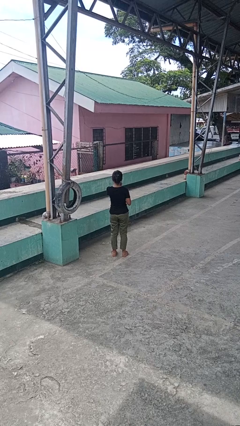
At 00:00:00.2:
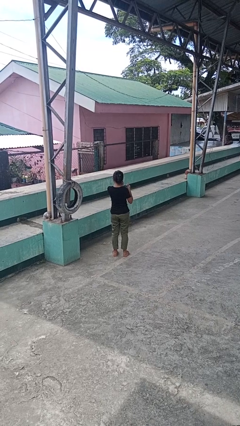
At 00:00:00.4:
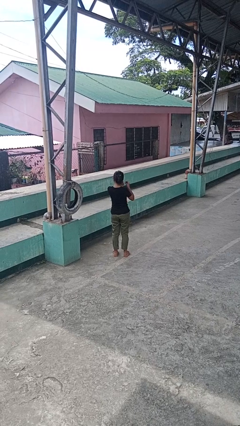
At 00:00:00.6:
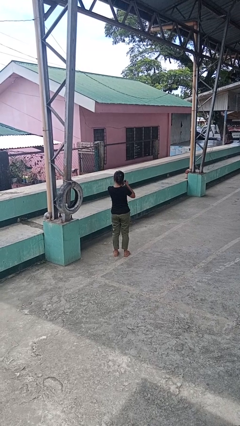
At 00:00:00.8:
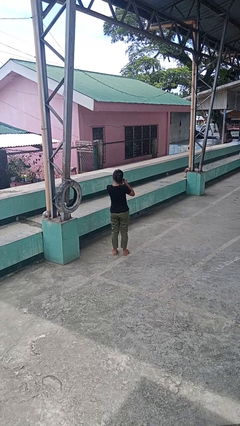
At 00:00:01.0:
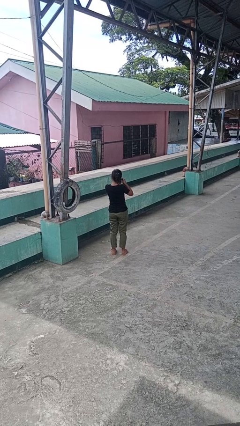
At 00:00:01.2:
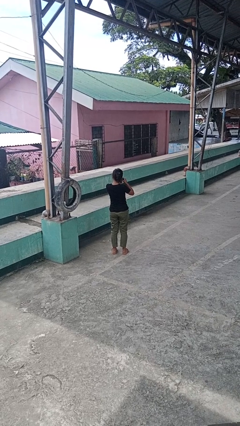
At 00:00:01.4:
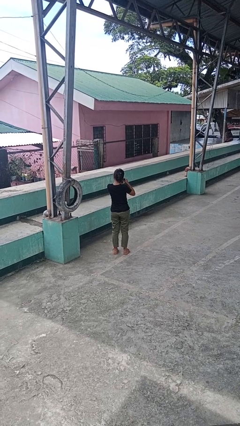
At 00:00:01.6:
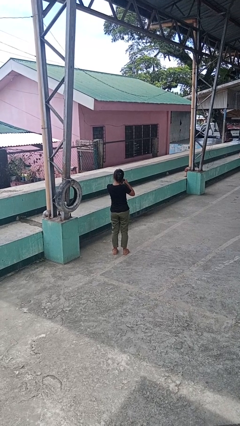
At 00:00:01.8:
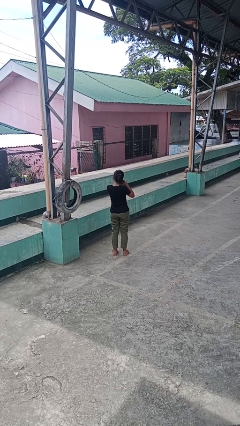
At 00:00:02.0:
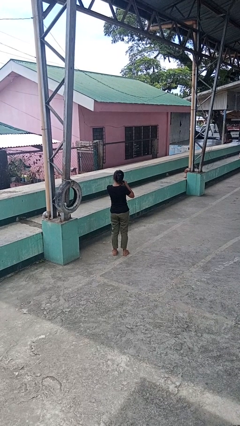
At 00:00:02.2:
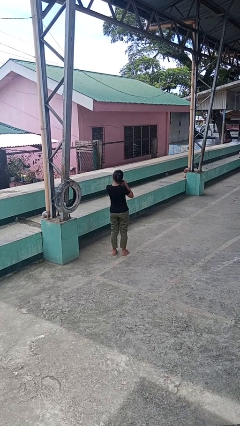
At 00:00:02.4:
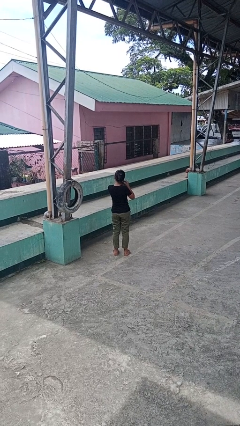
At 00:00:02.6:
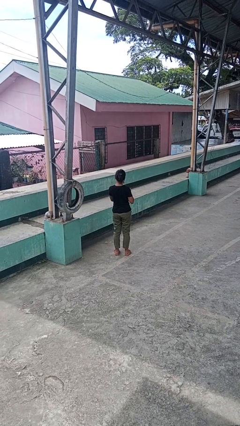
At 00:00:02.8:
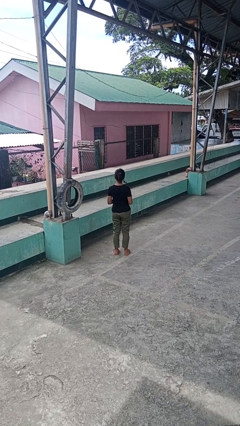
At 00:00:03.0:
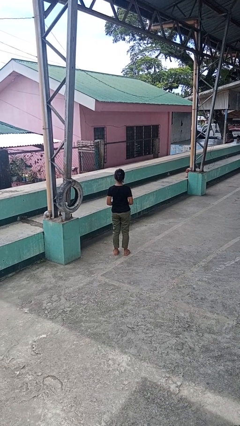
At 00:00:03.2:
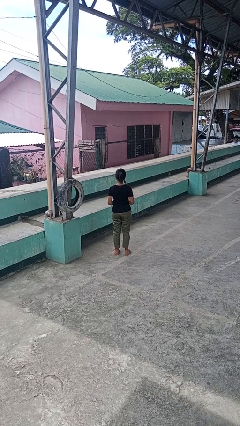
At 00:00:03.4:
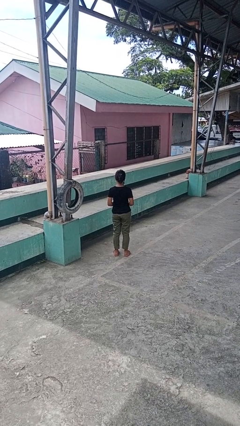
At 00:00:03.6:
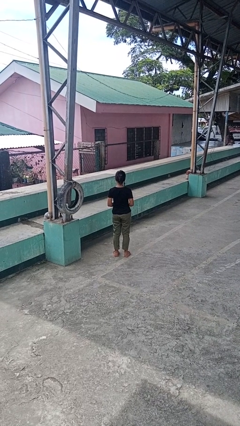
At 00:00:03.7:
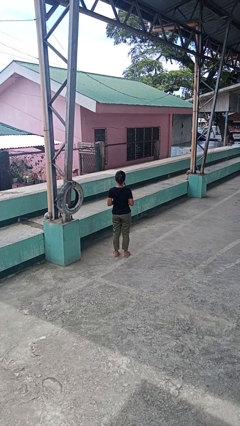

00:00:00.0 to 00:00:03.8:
person puts on earrings

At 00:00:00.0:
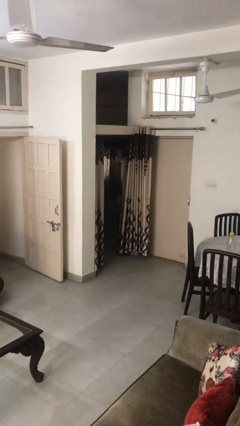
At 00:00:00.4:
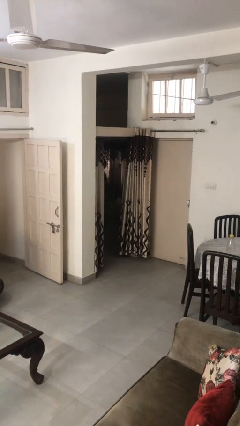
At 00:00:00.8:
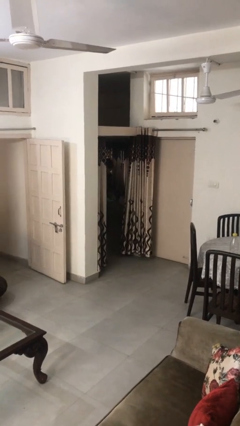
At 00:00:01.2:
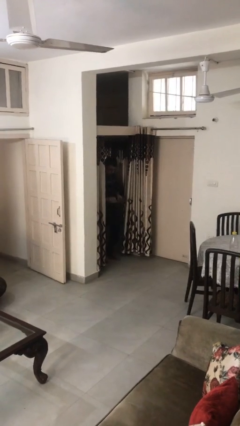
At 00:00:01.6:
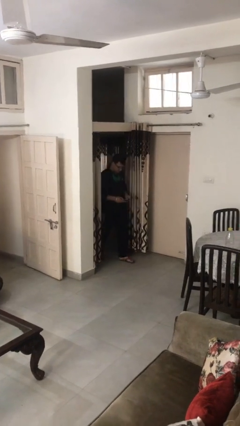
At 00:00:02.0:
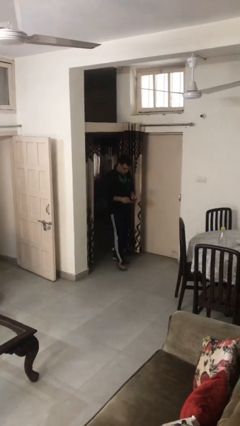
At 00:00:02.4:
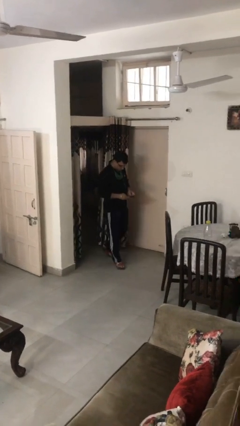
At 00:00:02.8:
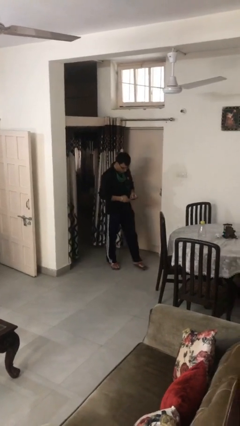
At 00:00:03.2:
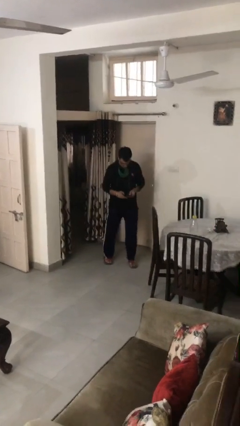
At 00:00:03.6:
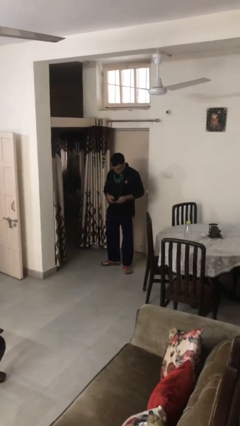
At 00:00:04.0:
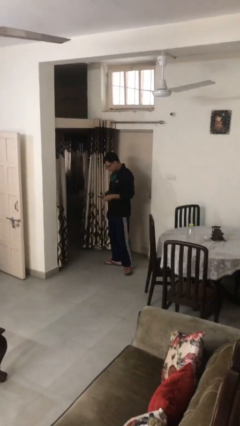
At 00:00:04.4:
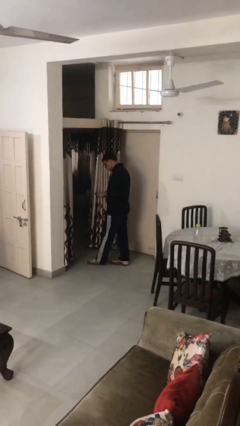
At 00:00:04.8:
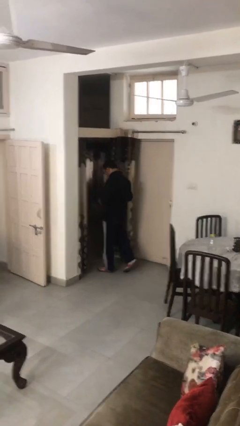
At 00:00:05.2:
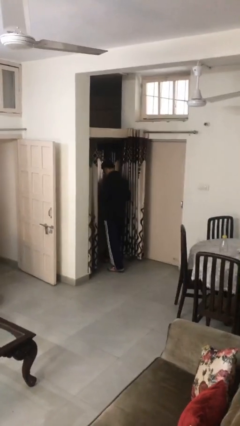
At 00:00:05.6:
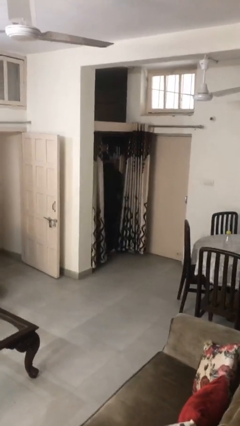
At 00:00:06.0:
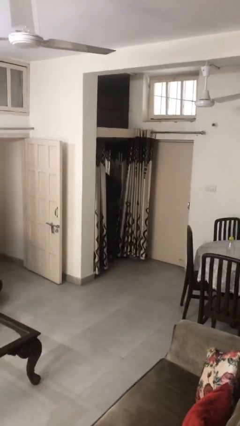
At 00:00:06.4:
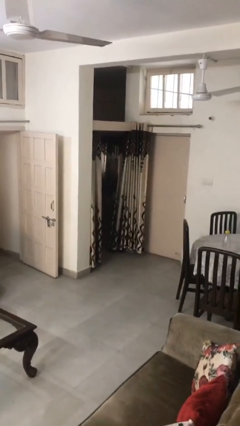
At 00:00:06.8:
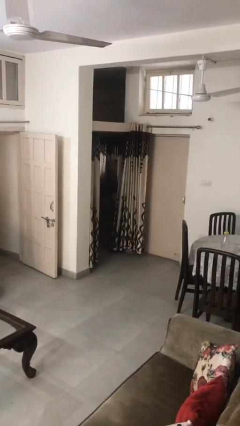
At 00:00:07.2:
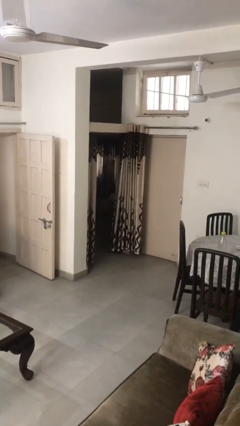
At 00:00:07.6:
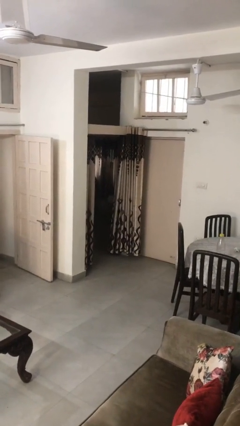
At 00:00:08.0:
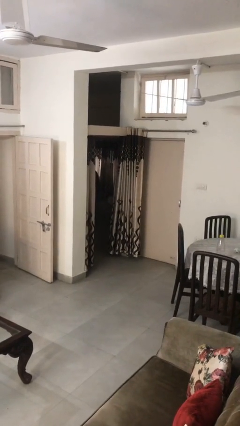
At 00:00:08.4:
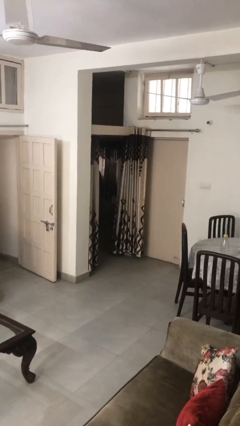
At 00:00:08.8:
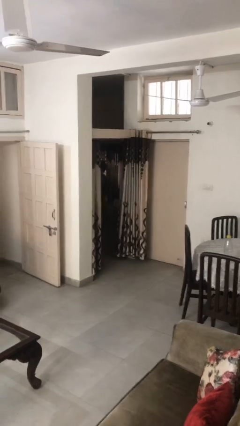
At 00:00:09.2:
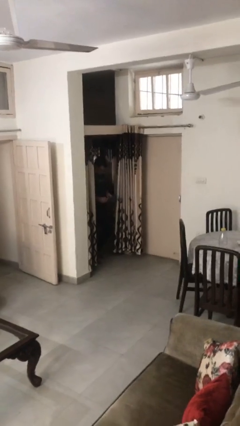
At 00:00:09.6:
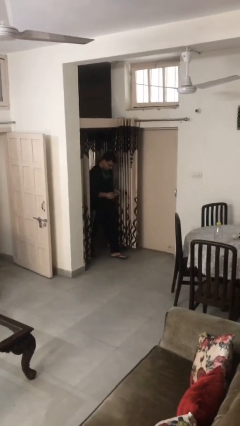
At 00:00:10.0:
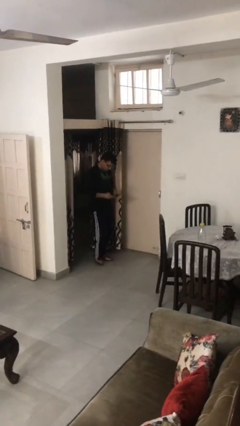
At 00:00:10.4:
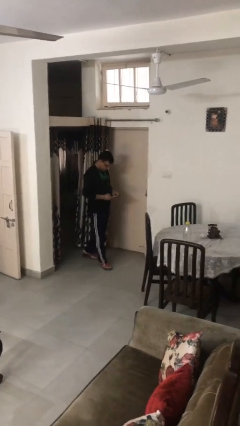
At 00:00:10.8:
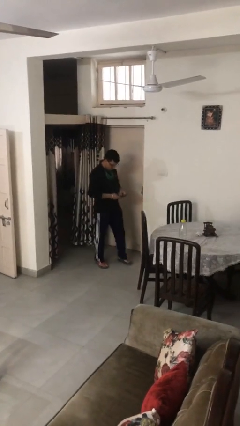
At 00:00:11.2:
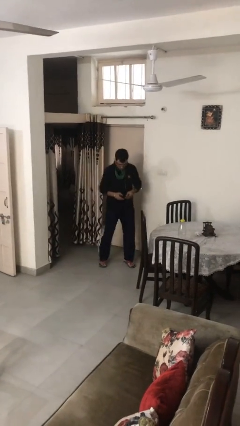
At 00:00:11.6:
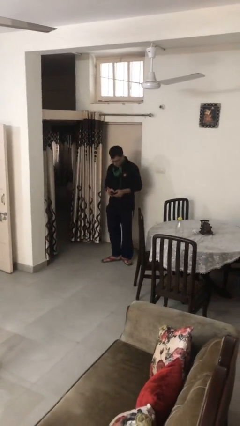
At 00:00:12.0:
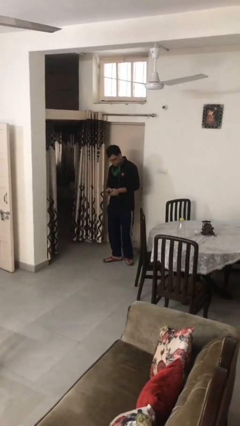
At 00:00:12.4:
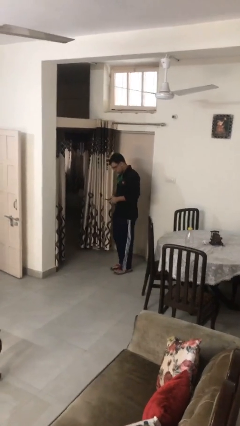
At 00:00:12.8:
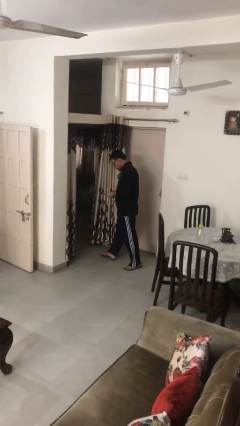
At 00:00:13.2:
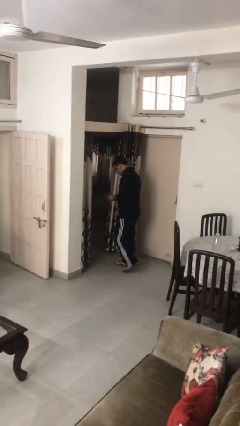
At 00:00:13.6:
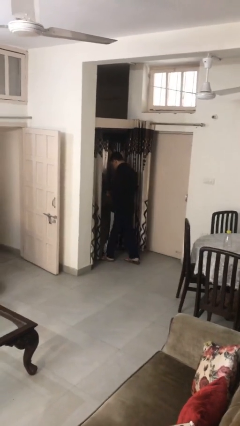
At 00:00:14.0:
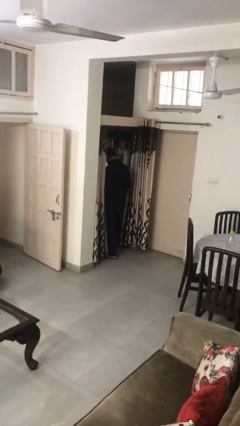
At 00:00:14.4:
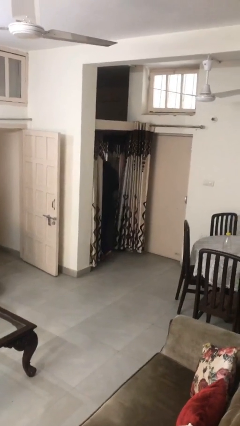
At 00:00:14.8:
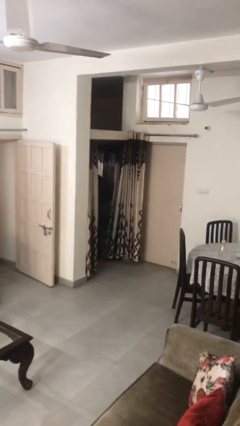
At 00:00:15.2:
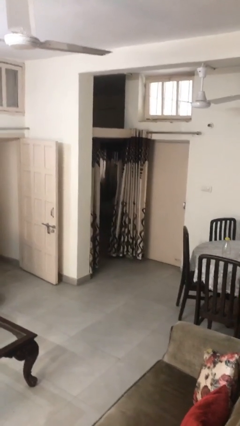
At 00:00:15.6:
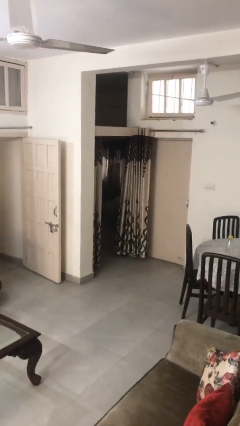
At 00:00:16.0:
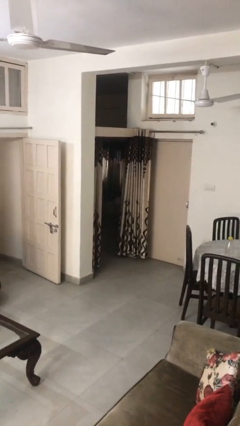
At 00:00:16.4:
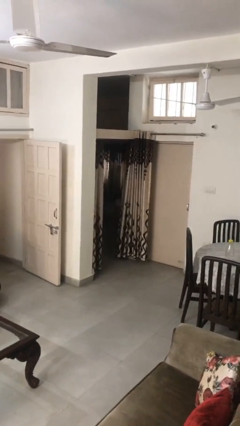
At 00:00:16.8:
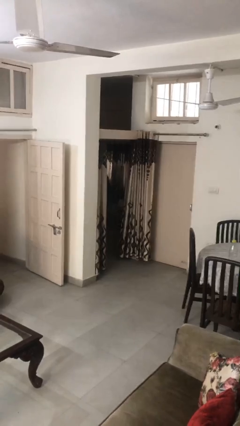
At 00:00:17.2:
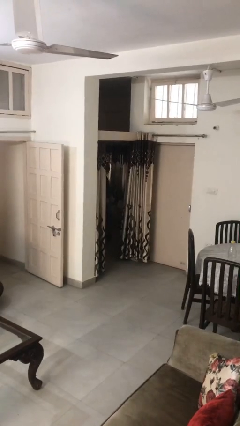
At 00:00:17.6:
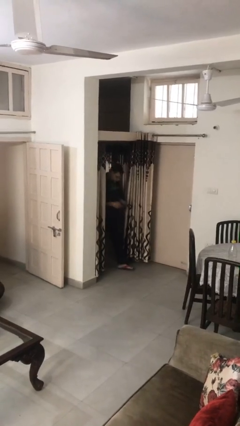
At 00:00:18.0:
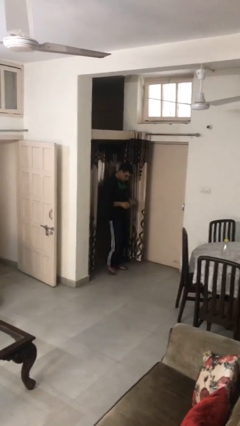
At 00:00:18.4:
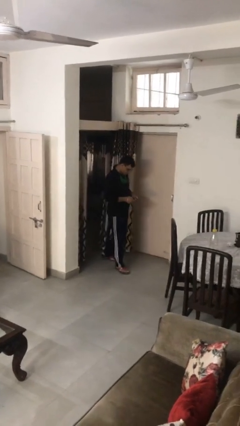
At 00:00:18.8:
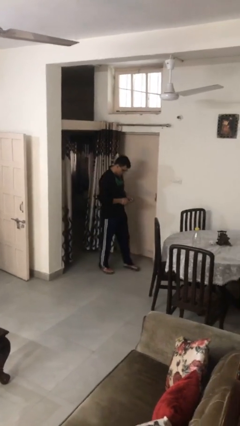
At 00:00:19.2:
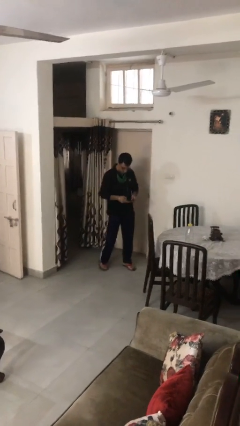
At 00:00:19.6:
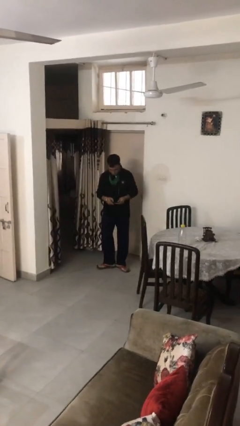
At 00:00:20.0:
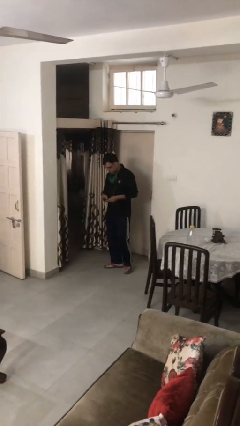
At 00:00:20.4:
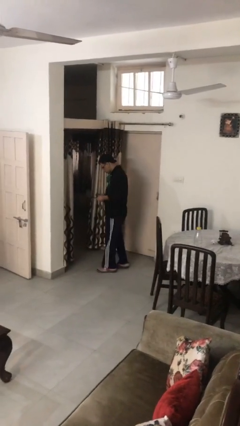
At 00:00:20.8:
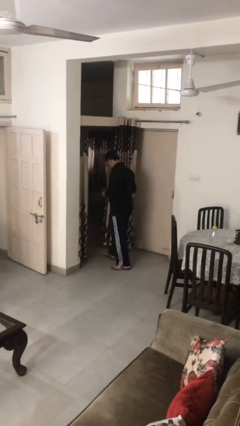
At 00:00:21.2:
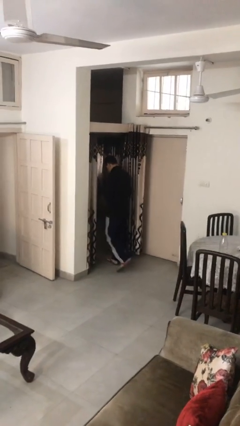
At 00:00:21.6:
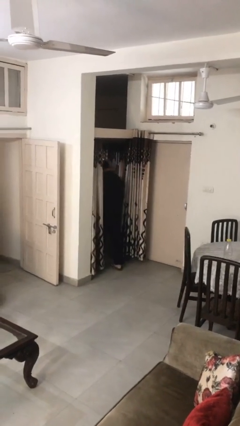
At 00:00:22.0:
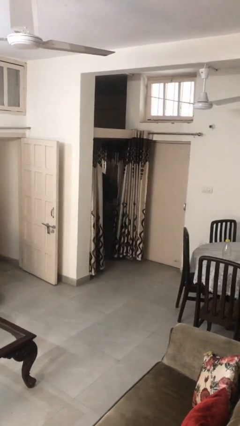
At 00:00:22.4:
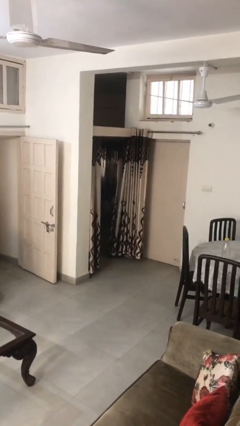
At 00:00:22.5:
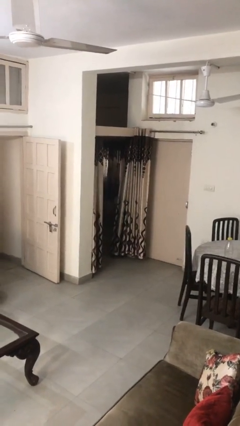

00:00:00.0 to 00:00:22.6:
person texts on phone

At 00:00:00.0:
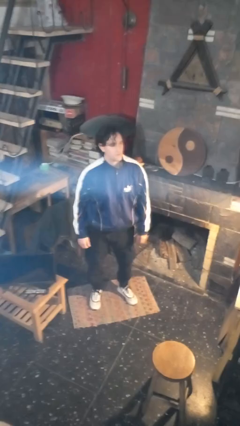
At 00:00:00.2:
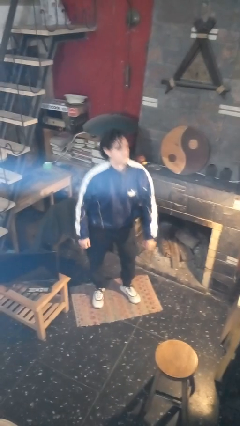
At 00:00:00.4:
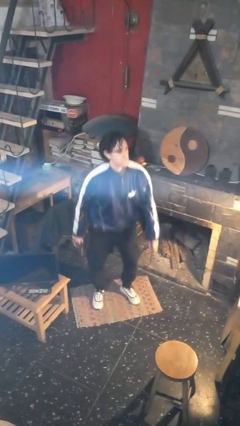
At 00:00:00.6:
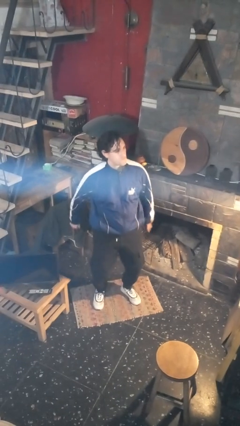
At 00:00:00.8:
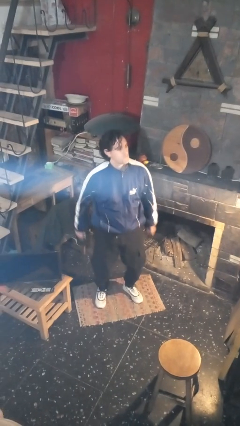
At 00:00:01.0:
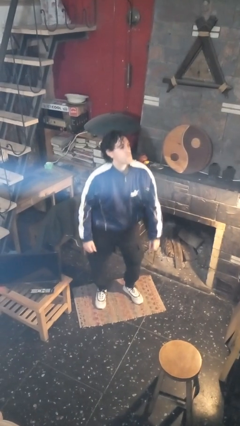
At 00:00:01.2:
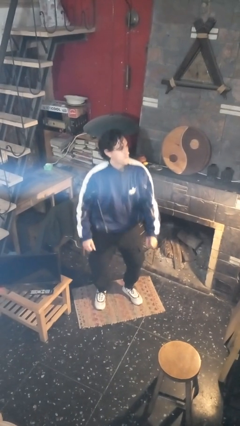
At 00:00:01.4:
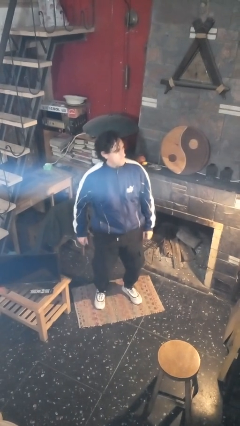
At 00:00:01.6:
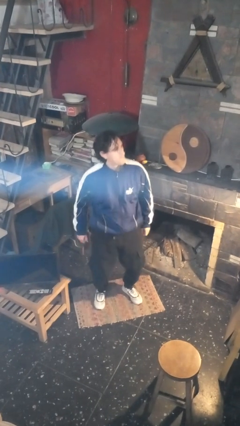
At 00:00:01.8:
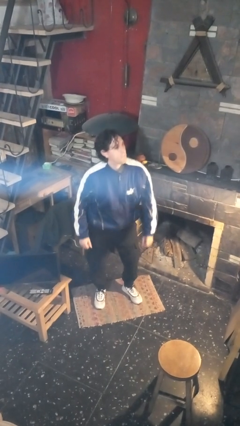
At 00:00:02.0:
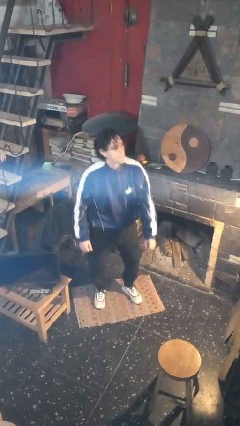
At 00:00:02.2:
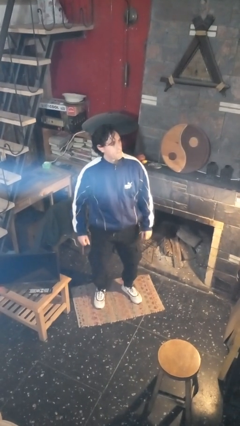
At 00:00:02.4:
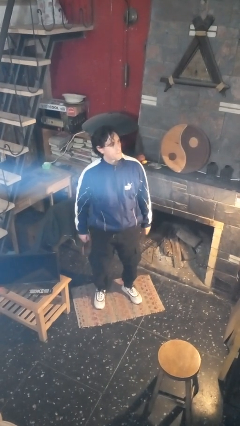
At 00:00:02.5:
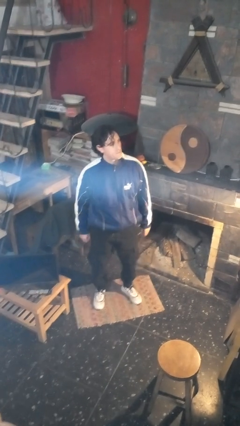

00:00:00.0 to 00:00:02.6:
person wiggles hips
